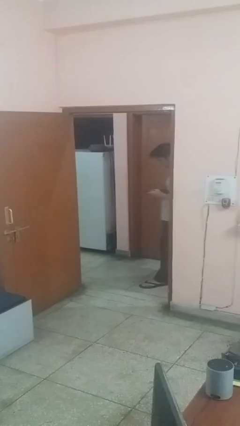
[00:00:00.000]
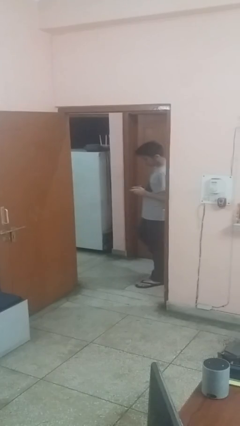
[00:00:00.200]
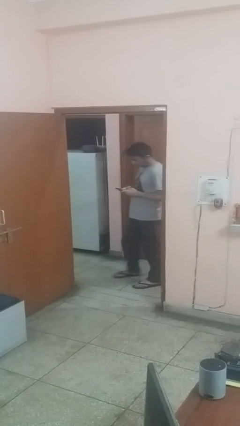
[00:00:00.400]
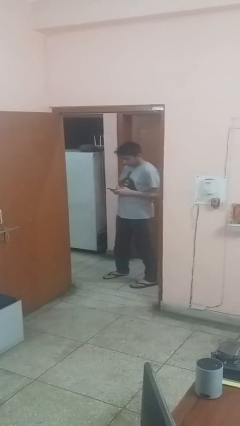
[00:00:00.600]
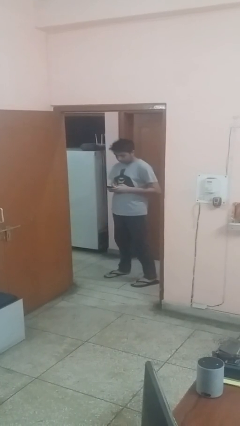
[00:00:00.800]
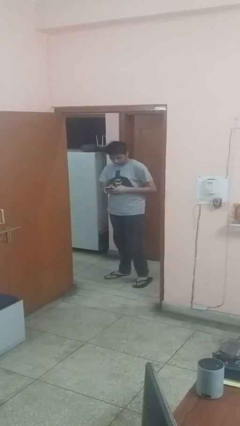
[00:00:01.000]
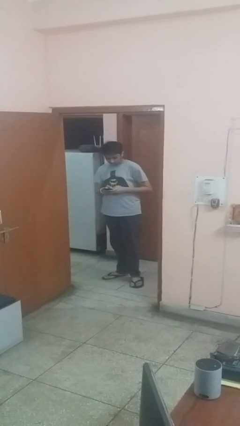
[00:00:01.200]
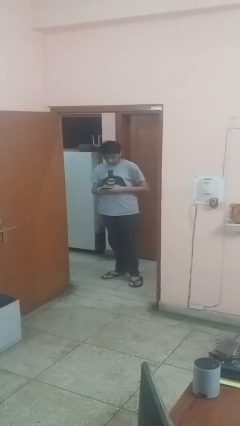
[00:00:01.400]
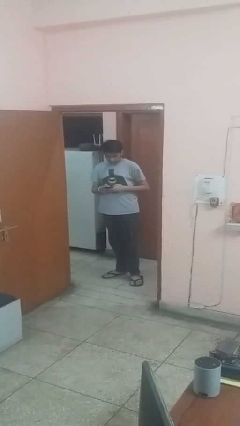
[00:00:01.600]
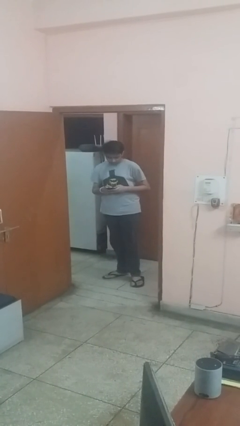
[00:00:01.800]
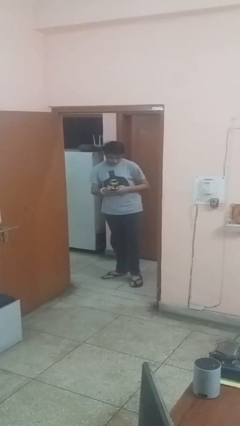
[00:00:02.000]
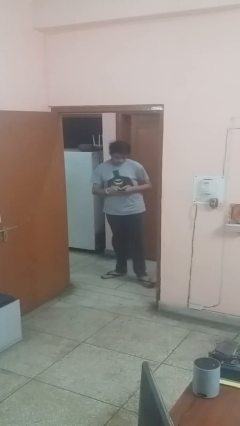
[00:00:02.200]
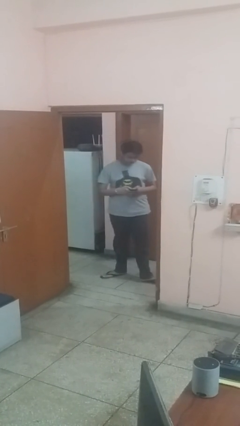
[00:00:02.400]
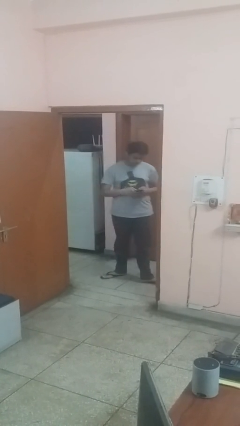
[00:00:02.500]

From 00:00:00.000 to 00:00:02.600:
person enters scene through structure

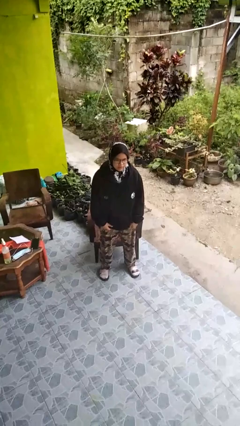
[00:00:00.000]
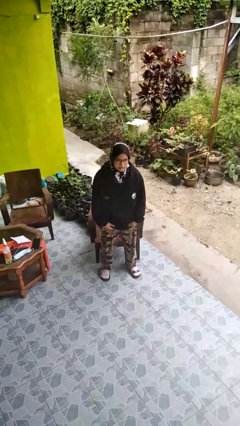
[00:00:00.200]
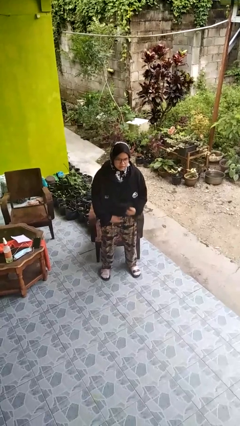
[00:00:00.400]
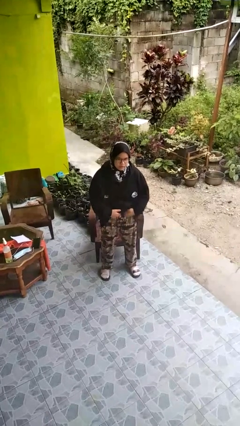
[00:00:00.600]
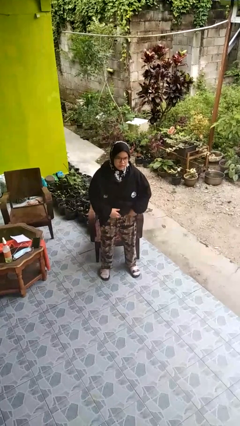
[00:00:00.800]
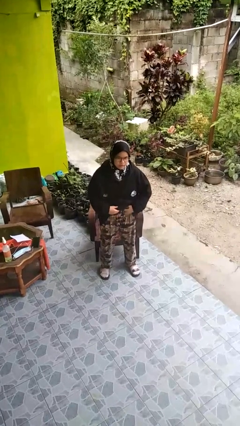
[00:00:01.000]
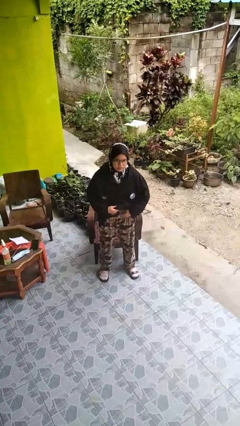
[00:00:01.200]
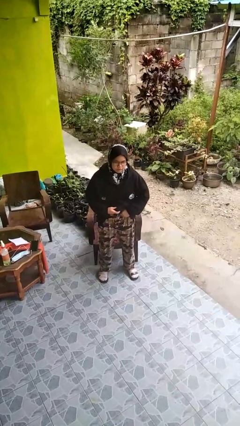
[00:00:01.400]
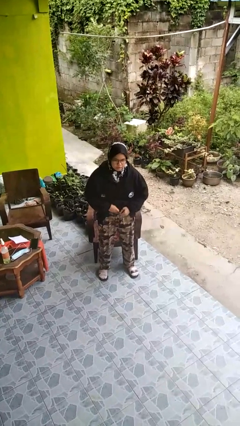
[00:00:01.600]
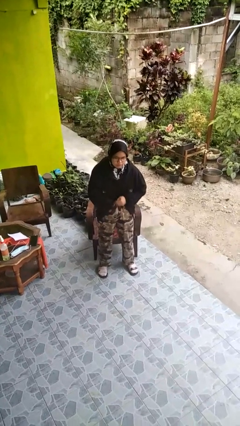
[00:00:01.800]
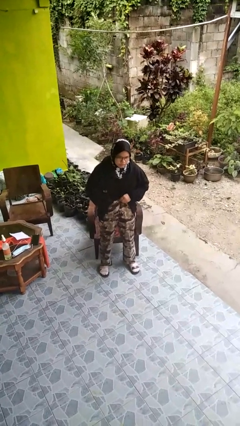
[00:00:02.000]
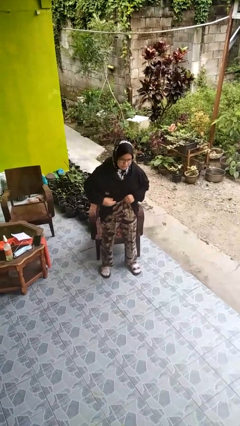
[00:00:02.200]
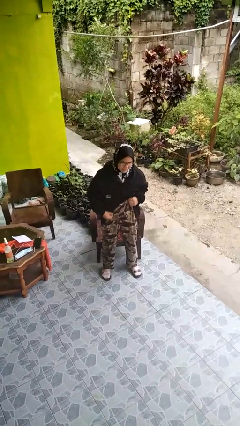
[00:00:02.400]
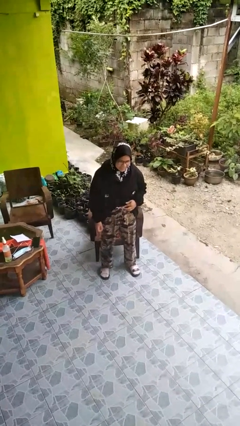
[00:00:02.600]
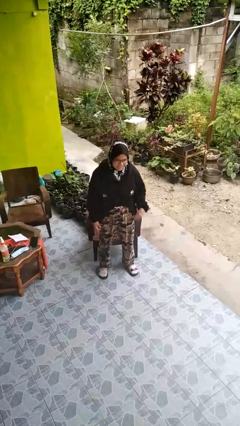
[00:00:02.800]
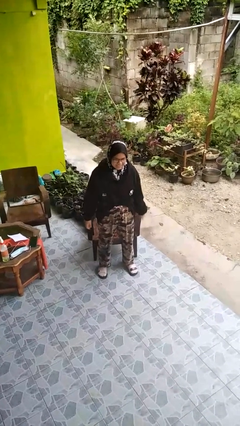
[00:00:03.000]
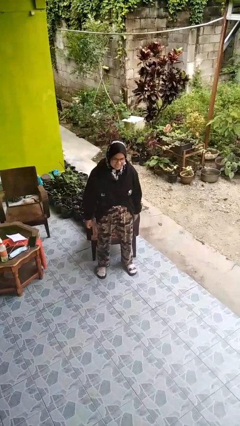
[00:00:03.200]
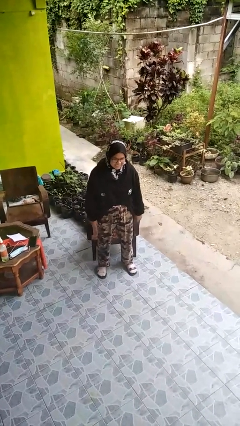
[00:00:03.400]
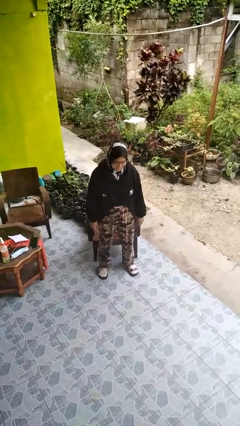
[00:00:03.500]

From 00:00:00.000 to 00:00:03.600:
person tucks in shirt

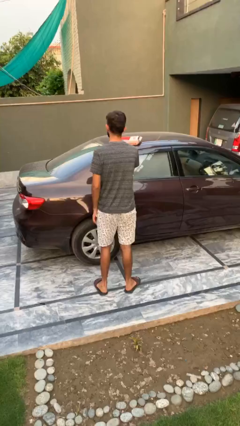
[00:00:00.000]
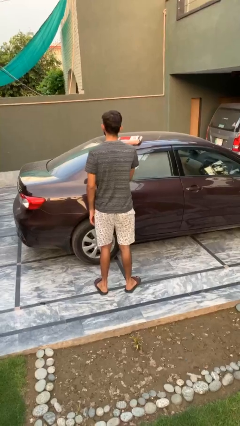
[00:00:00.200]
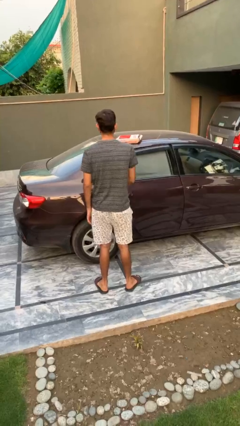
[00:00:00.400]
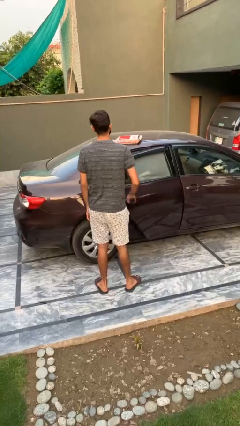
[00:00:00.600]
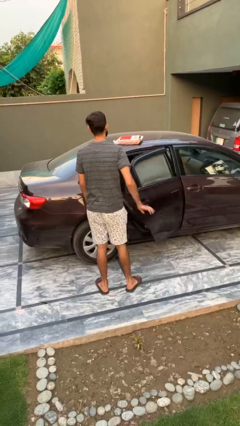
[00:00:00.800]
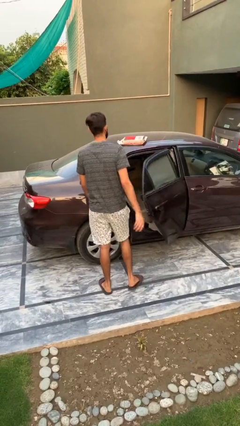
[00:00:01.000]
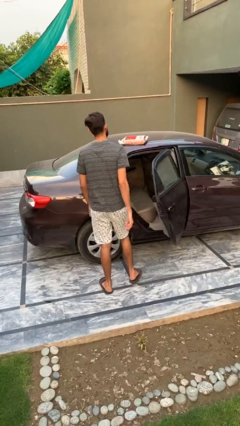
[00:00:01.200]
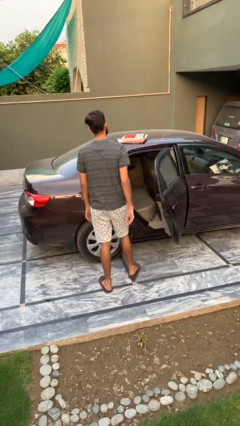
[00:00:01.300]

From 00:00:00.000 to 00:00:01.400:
person opens car door

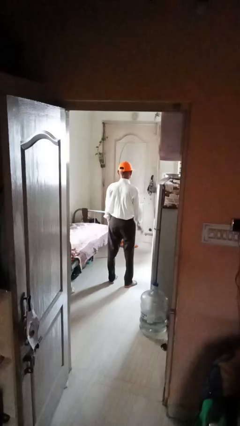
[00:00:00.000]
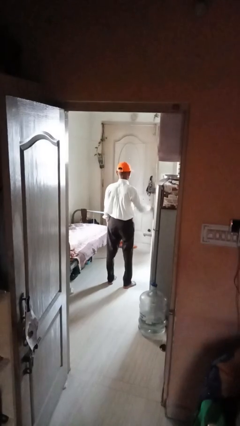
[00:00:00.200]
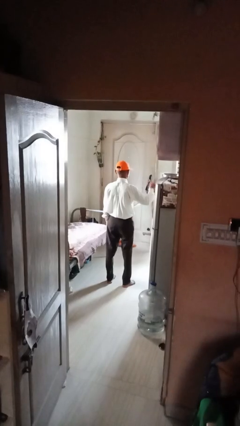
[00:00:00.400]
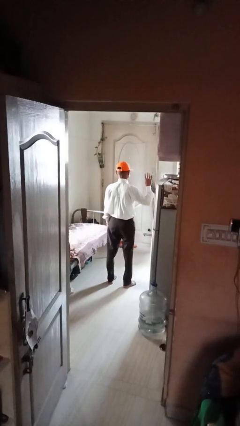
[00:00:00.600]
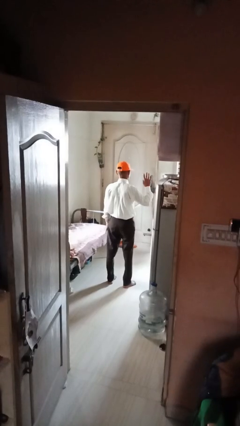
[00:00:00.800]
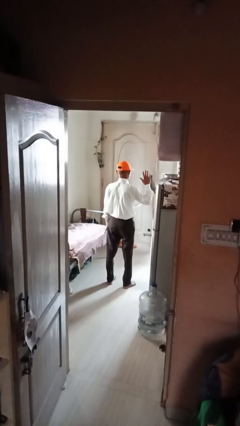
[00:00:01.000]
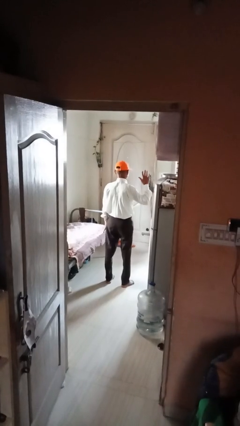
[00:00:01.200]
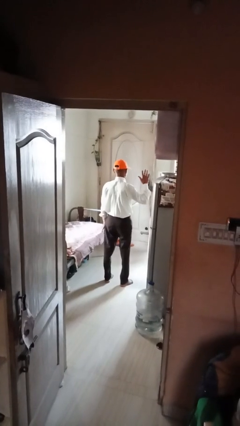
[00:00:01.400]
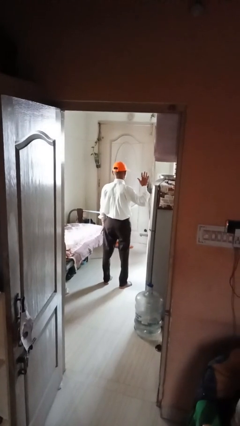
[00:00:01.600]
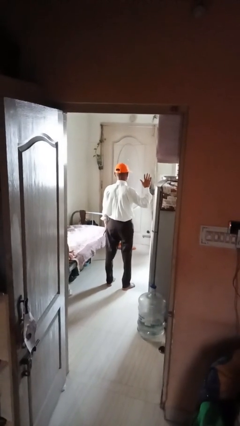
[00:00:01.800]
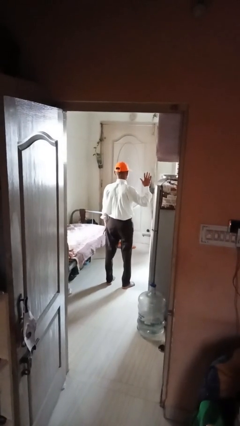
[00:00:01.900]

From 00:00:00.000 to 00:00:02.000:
person gestures number five

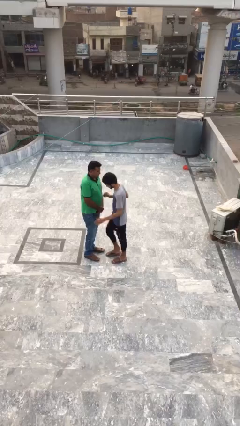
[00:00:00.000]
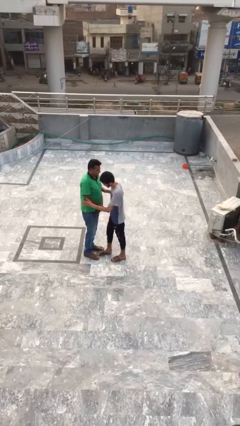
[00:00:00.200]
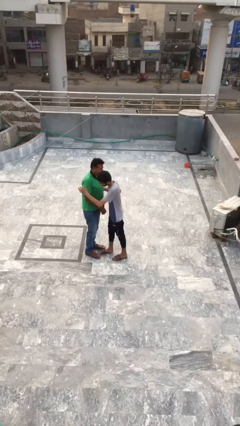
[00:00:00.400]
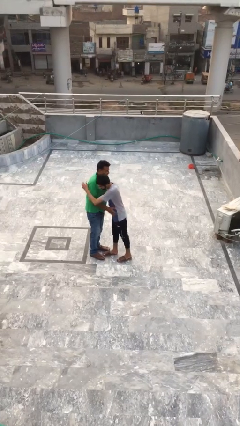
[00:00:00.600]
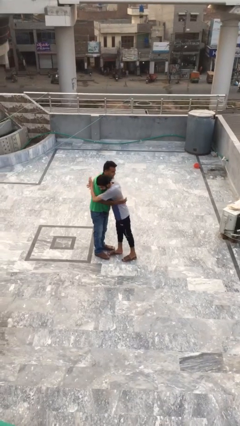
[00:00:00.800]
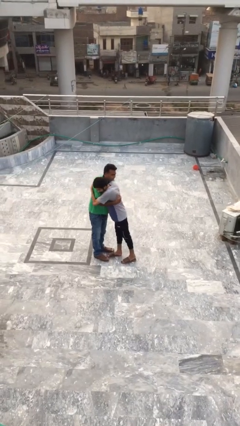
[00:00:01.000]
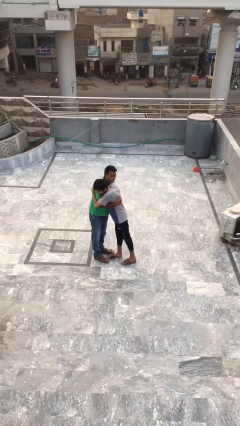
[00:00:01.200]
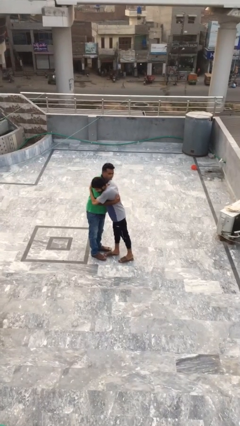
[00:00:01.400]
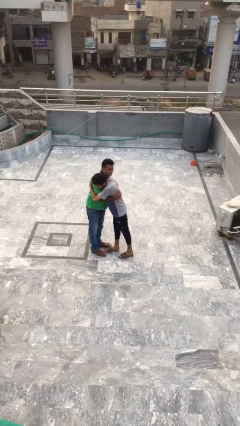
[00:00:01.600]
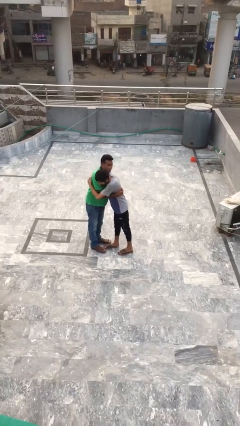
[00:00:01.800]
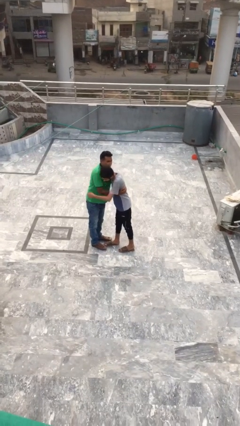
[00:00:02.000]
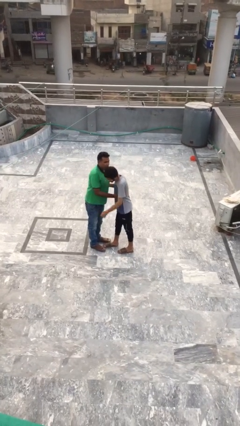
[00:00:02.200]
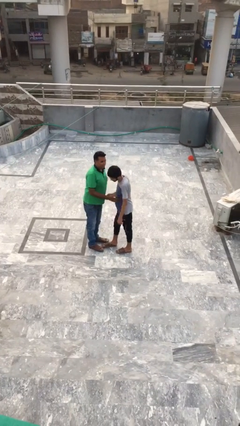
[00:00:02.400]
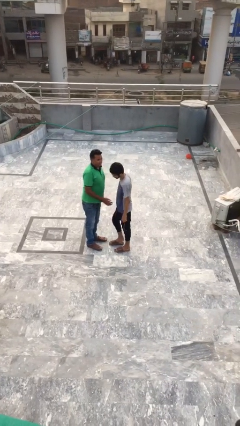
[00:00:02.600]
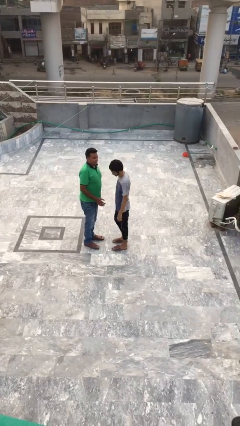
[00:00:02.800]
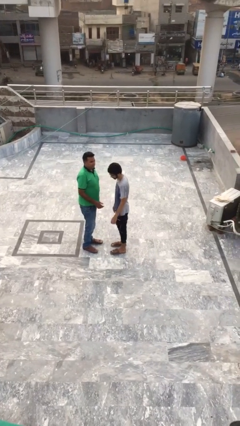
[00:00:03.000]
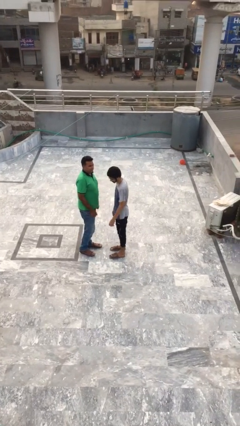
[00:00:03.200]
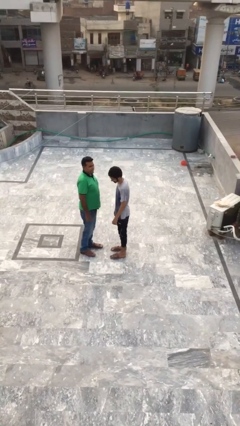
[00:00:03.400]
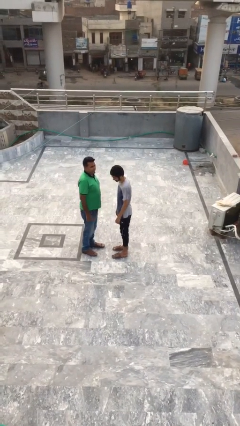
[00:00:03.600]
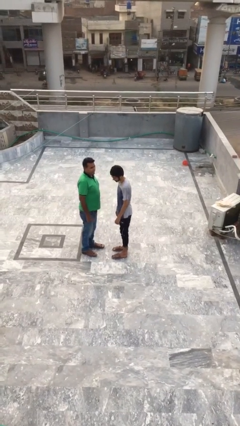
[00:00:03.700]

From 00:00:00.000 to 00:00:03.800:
person embraces person

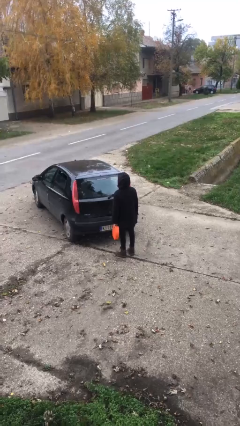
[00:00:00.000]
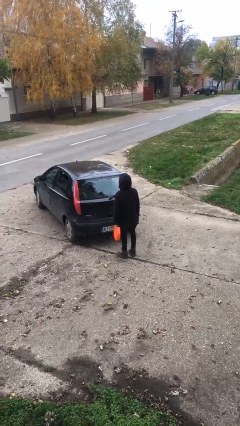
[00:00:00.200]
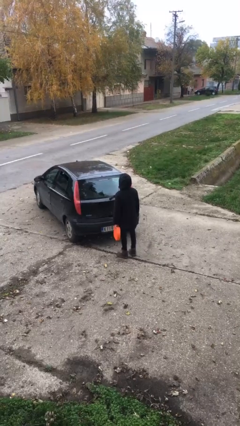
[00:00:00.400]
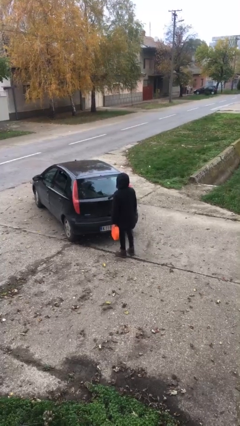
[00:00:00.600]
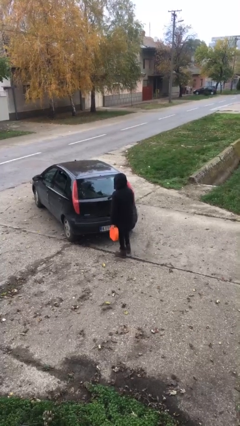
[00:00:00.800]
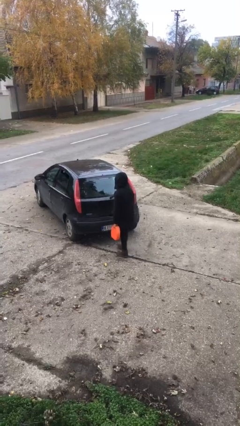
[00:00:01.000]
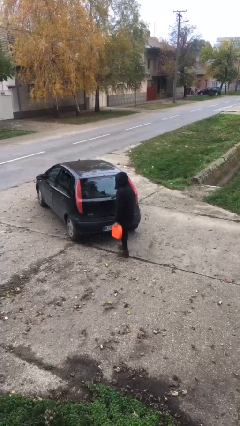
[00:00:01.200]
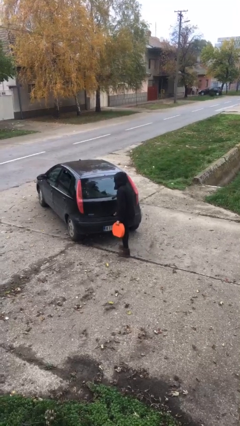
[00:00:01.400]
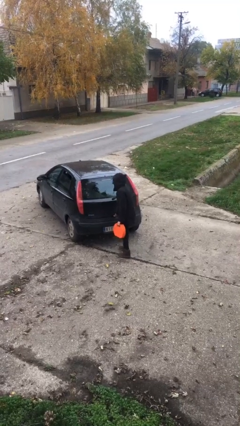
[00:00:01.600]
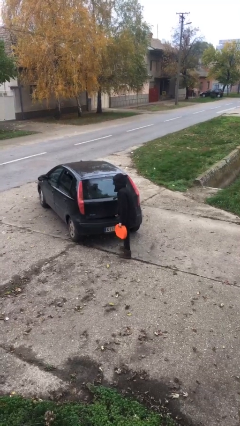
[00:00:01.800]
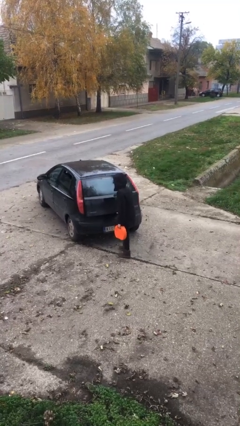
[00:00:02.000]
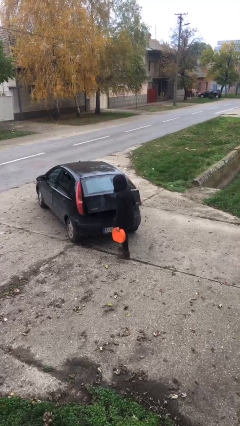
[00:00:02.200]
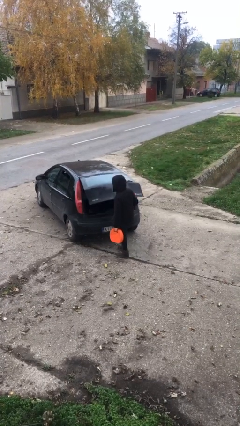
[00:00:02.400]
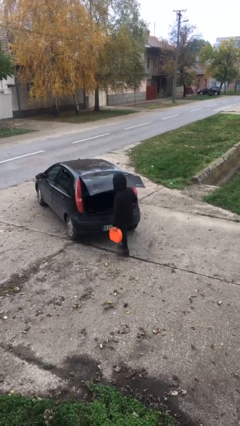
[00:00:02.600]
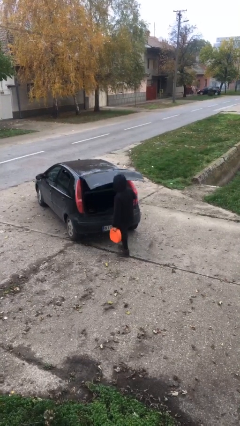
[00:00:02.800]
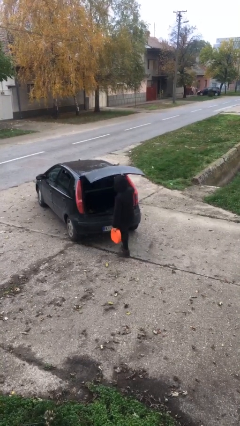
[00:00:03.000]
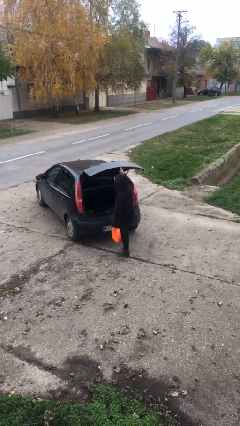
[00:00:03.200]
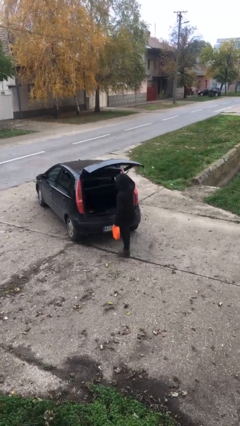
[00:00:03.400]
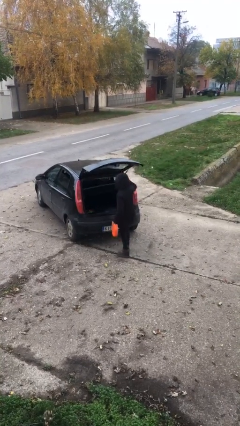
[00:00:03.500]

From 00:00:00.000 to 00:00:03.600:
person opens car trunk
